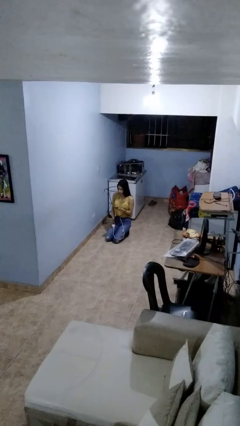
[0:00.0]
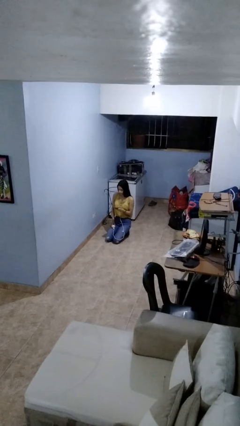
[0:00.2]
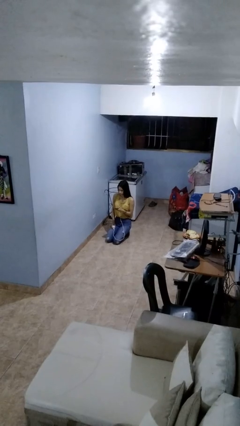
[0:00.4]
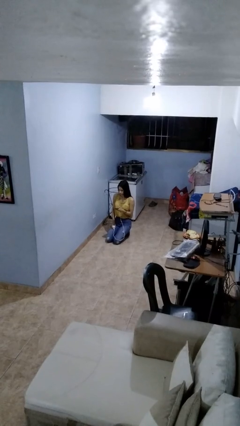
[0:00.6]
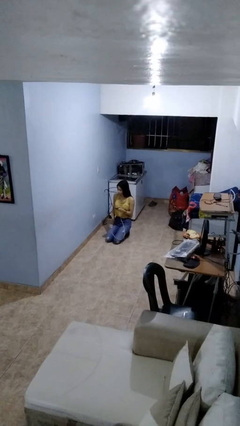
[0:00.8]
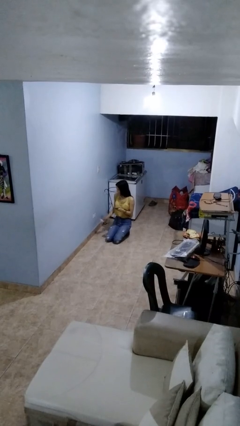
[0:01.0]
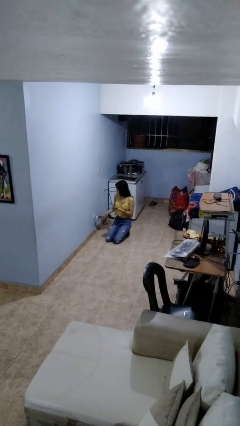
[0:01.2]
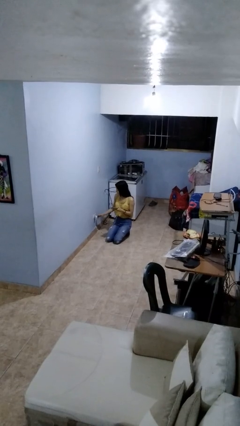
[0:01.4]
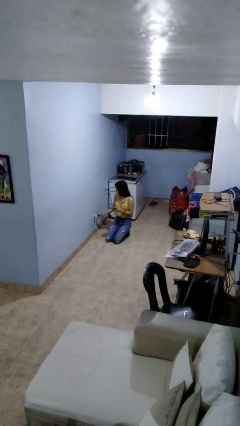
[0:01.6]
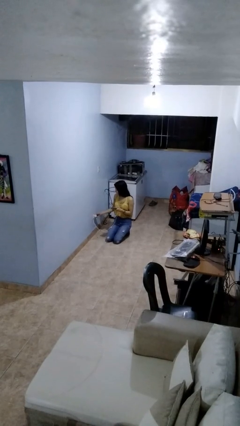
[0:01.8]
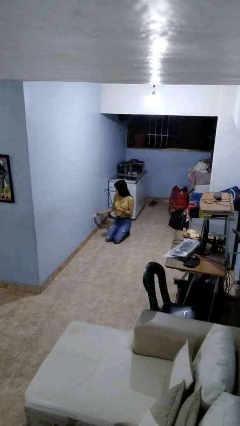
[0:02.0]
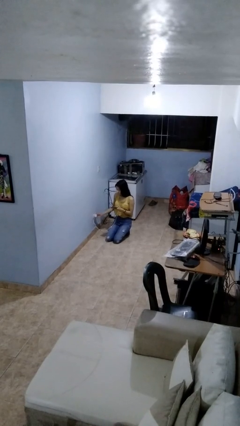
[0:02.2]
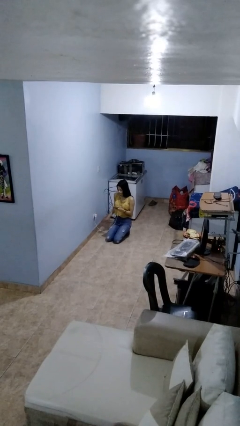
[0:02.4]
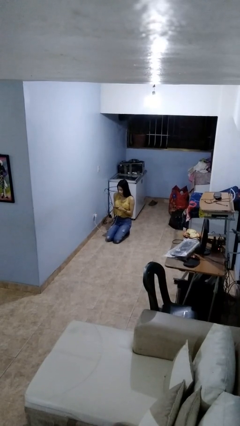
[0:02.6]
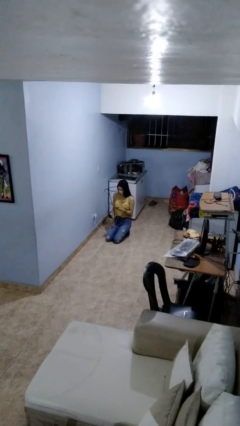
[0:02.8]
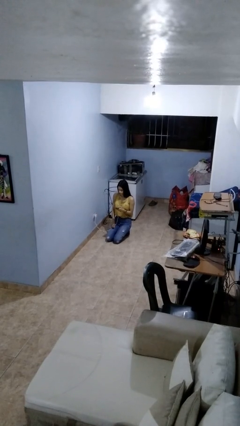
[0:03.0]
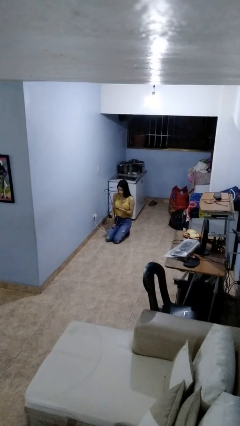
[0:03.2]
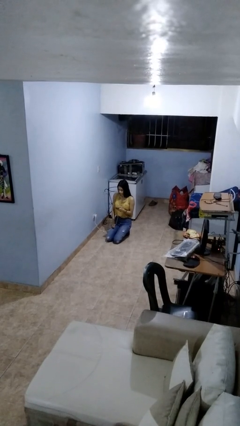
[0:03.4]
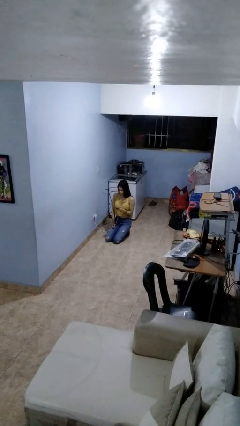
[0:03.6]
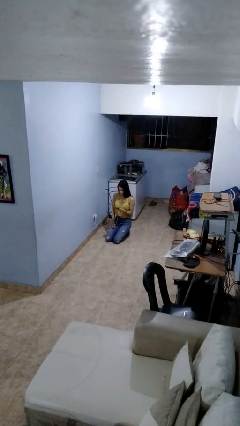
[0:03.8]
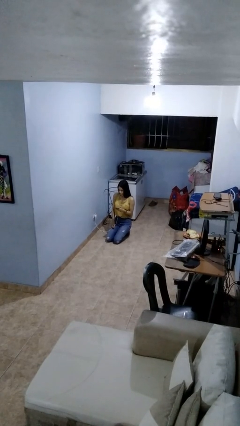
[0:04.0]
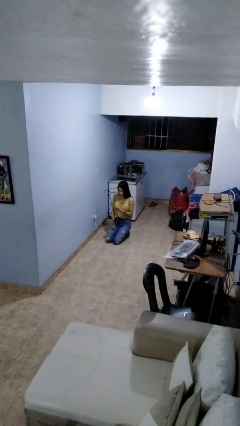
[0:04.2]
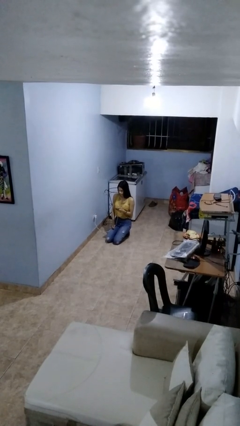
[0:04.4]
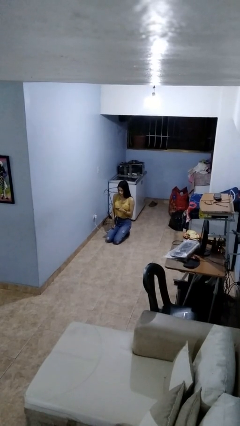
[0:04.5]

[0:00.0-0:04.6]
person plugs into electrical socket

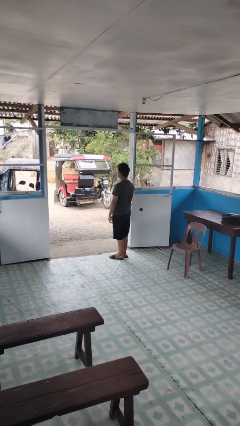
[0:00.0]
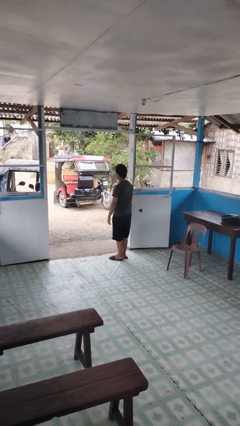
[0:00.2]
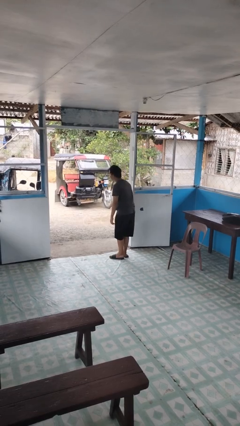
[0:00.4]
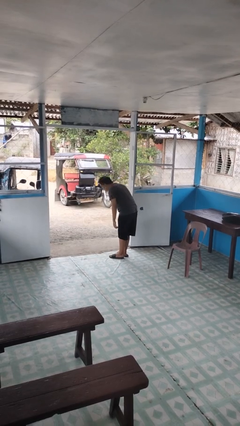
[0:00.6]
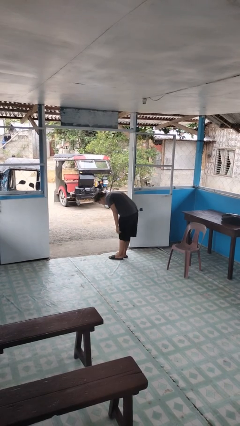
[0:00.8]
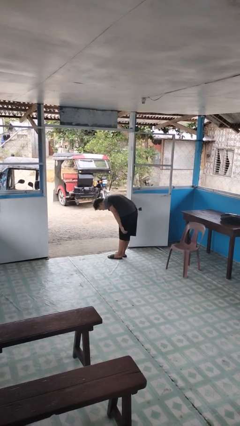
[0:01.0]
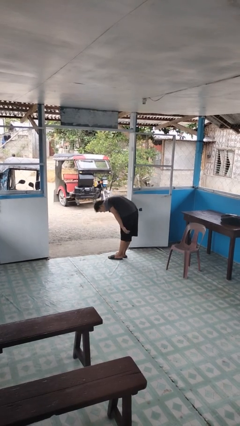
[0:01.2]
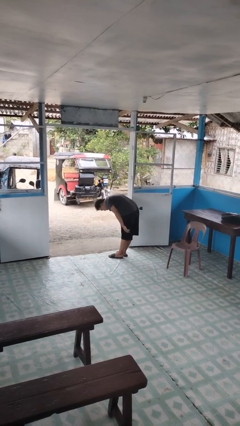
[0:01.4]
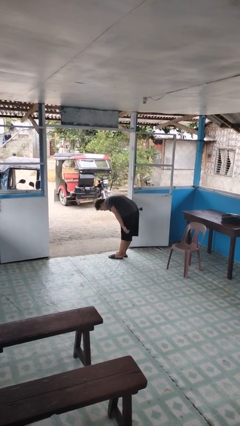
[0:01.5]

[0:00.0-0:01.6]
person bows

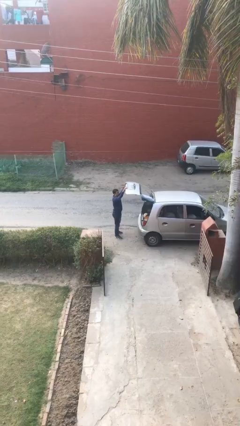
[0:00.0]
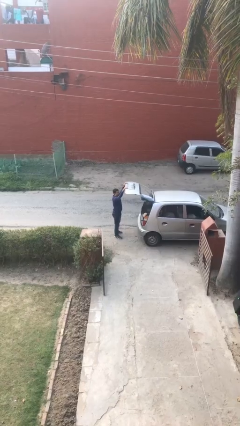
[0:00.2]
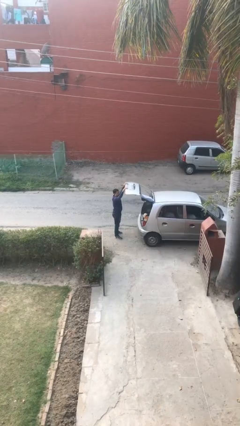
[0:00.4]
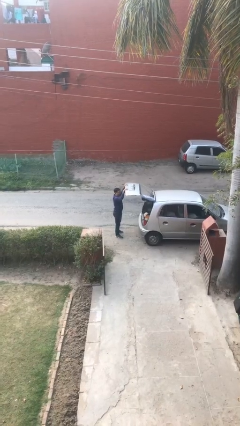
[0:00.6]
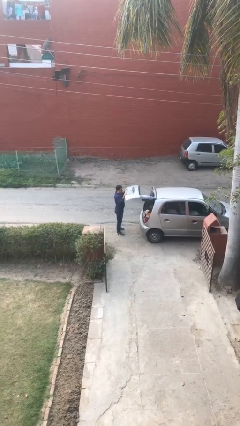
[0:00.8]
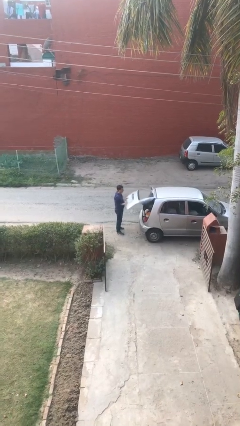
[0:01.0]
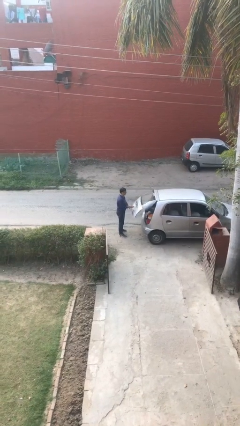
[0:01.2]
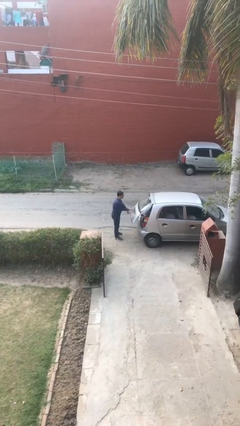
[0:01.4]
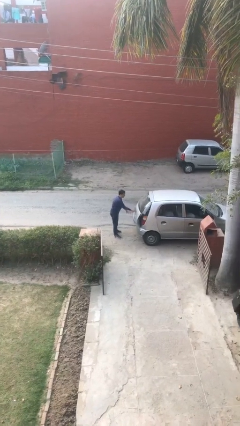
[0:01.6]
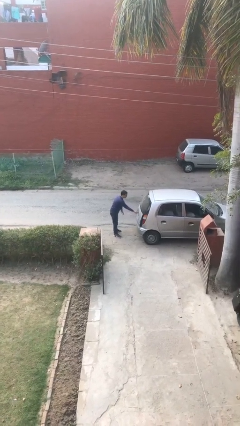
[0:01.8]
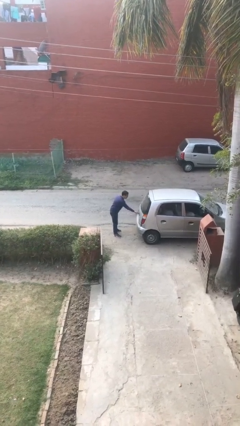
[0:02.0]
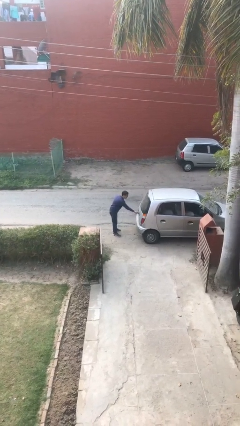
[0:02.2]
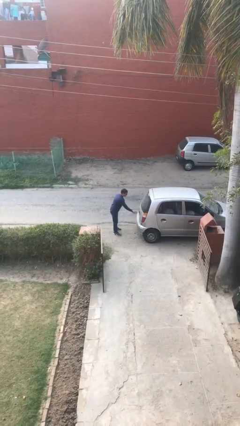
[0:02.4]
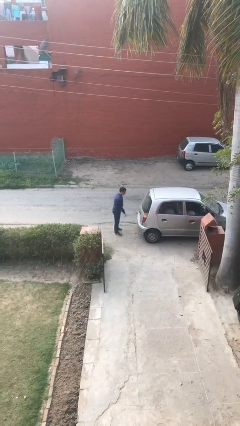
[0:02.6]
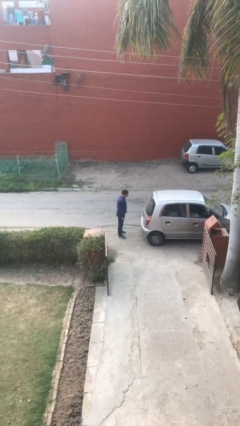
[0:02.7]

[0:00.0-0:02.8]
person closes car trunk

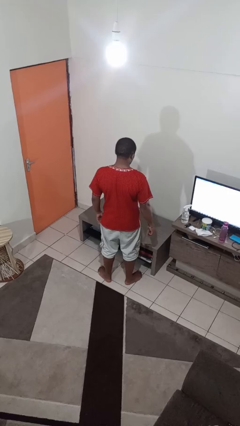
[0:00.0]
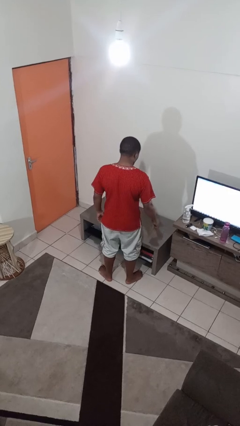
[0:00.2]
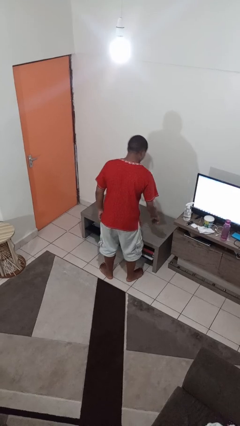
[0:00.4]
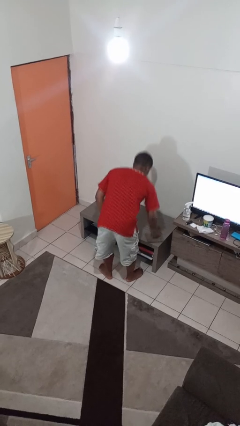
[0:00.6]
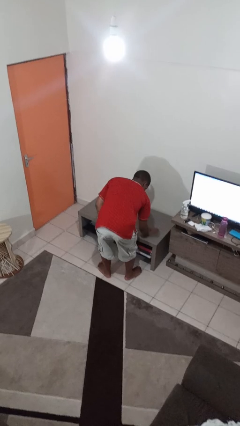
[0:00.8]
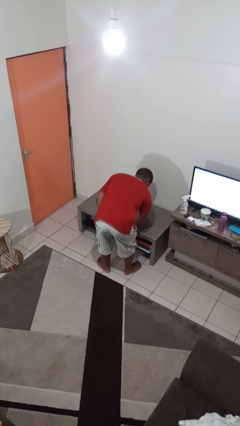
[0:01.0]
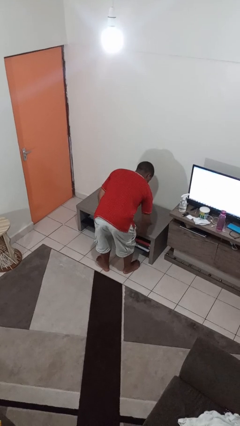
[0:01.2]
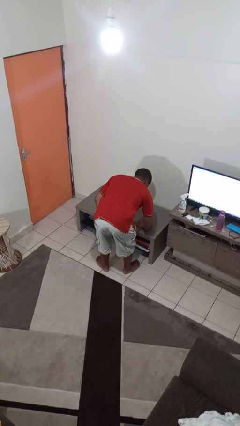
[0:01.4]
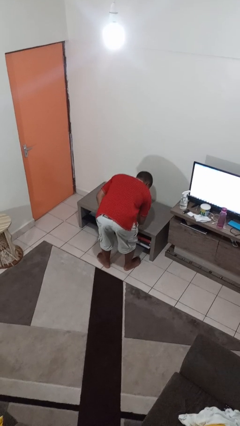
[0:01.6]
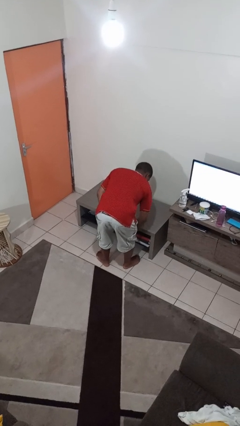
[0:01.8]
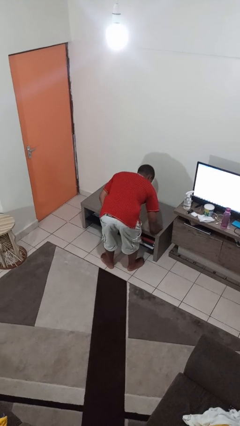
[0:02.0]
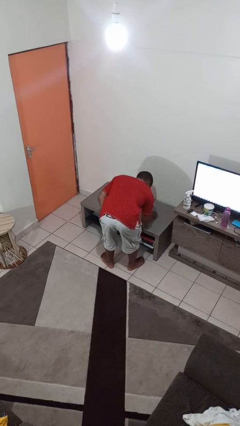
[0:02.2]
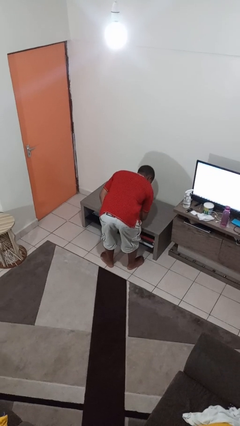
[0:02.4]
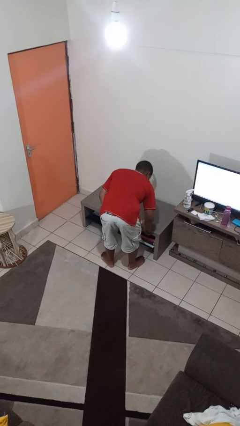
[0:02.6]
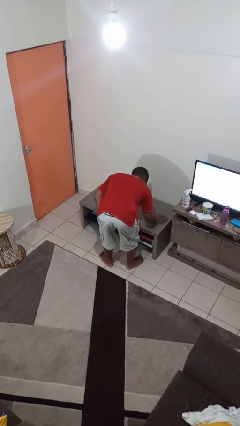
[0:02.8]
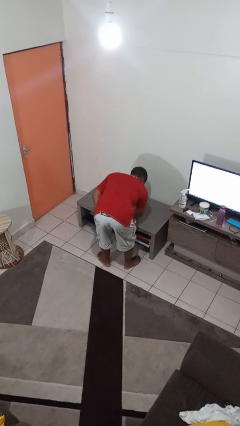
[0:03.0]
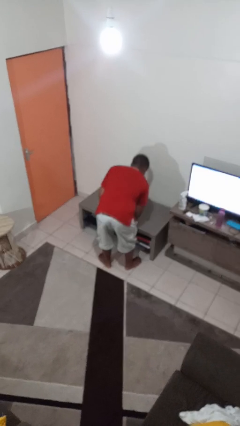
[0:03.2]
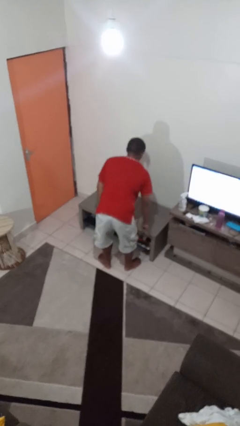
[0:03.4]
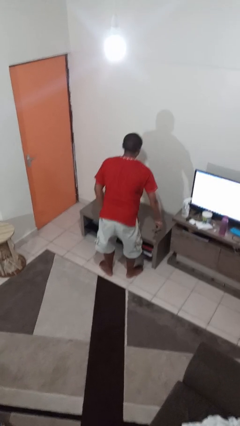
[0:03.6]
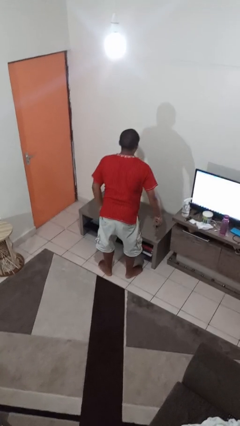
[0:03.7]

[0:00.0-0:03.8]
person cleans table with rag

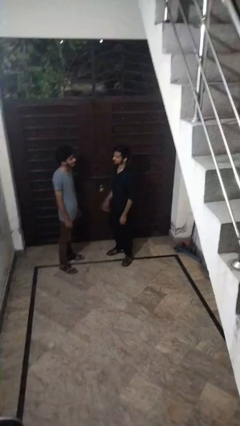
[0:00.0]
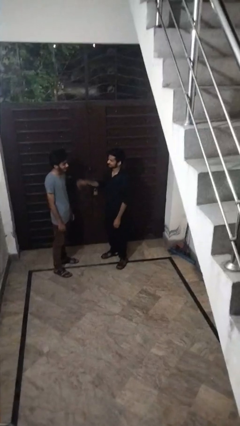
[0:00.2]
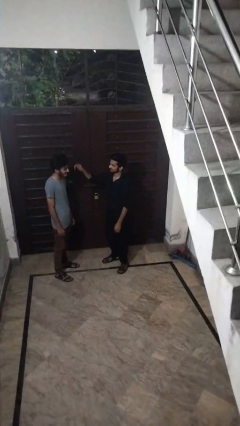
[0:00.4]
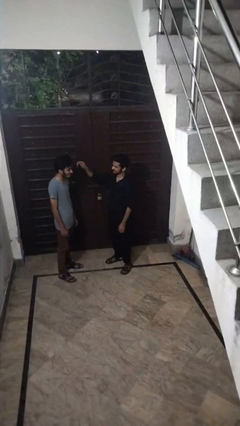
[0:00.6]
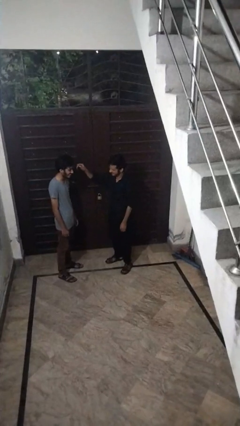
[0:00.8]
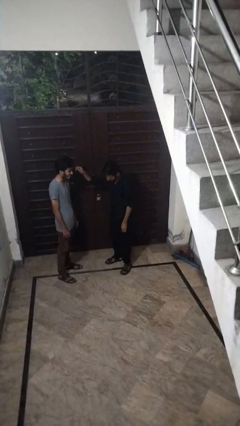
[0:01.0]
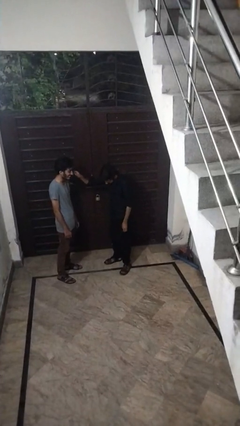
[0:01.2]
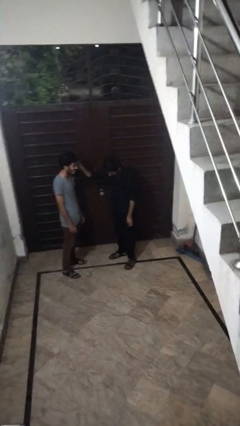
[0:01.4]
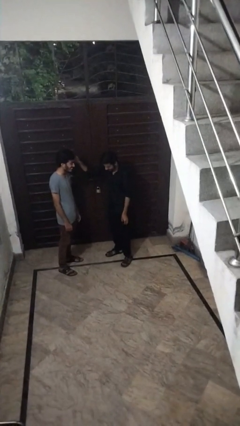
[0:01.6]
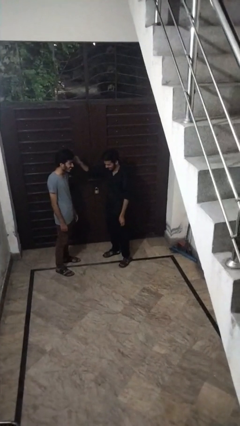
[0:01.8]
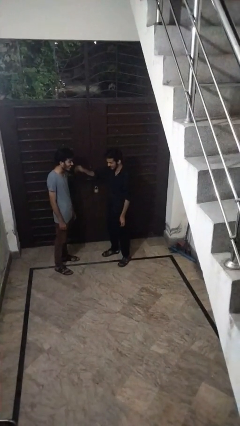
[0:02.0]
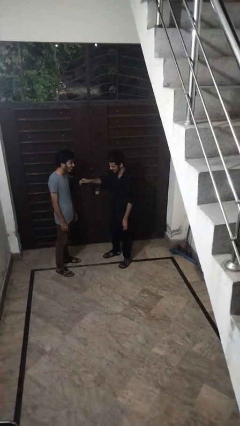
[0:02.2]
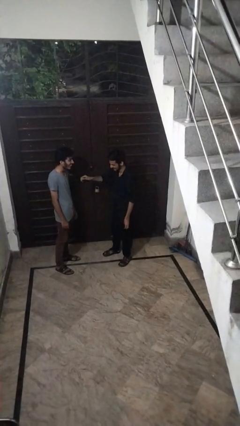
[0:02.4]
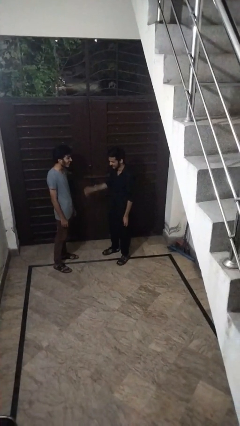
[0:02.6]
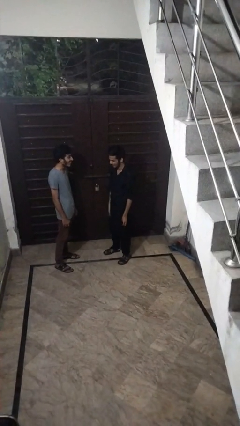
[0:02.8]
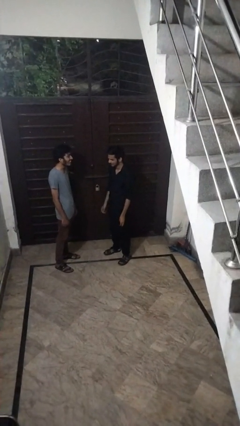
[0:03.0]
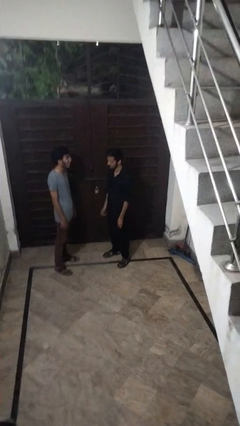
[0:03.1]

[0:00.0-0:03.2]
person grabs person by hair

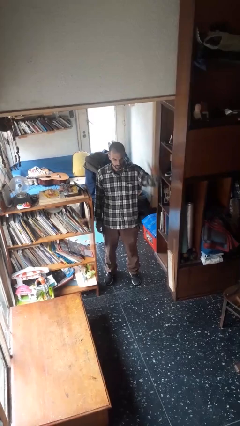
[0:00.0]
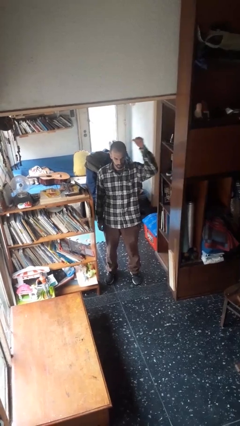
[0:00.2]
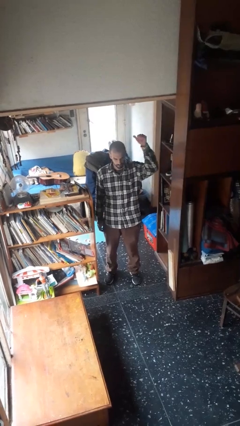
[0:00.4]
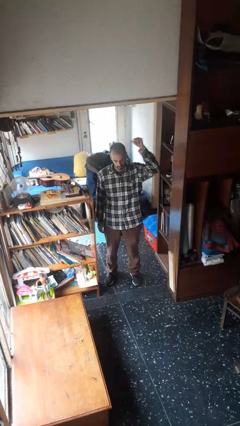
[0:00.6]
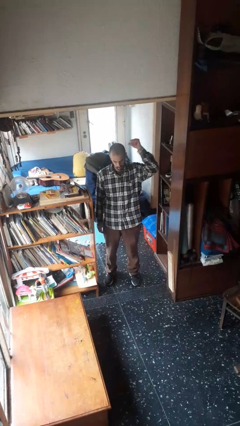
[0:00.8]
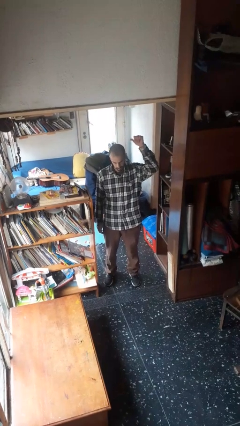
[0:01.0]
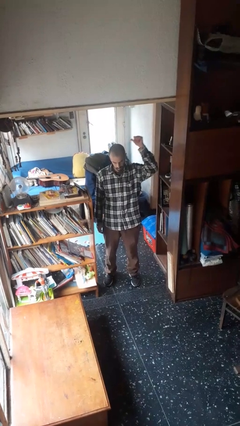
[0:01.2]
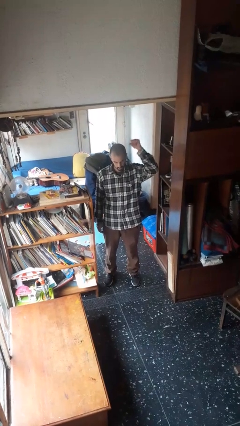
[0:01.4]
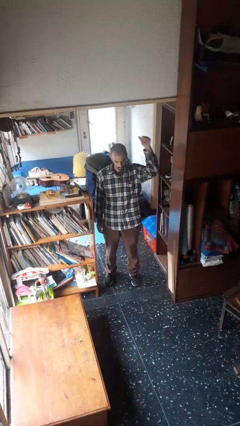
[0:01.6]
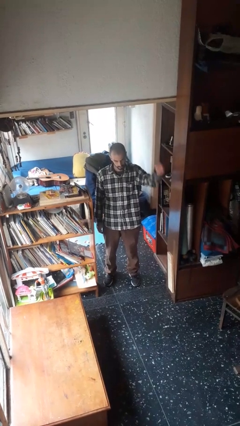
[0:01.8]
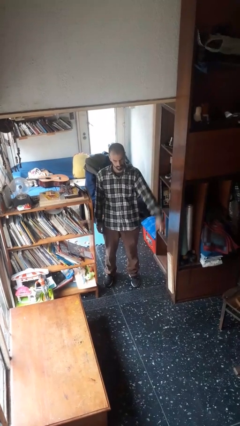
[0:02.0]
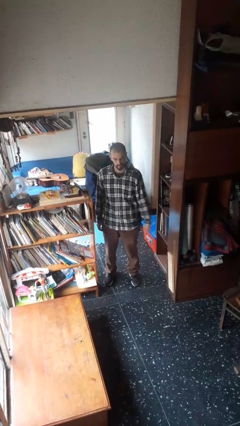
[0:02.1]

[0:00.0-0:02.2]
person gestures behind me
